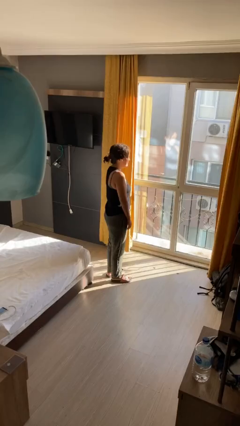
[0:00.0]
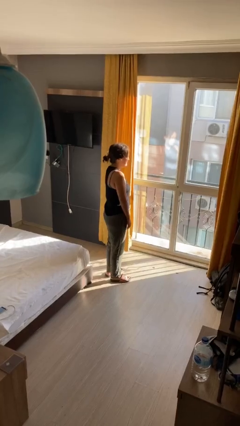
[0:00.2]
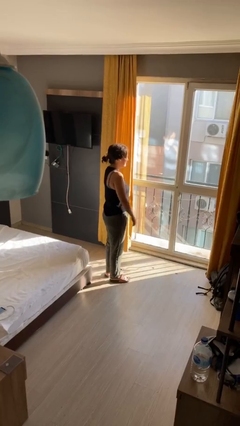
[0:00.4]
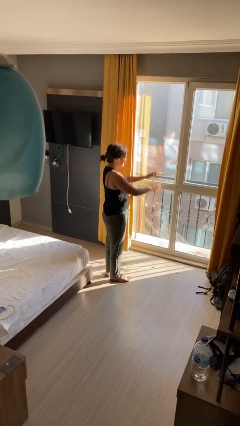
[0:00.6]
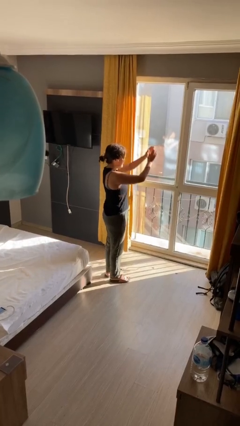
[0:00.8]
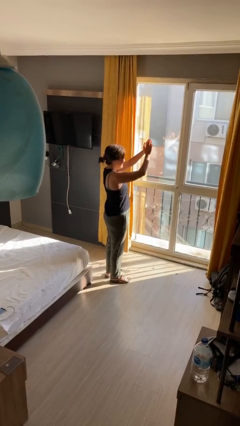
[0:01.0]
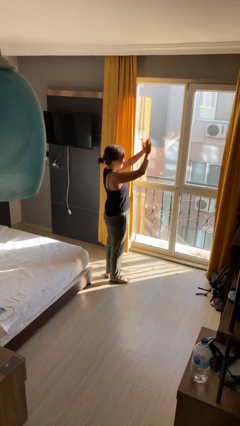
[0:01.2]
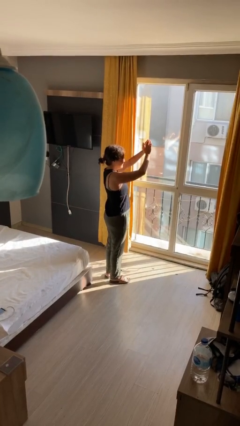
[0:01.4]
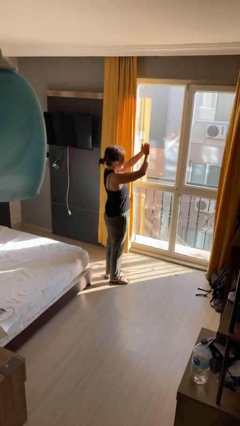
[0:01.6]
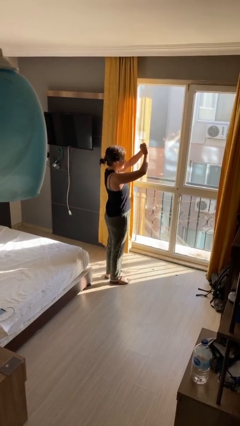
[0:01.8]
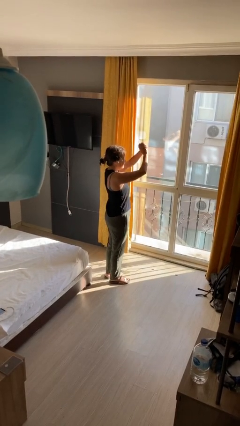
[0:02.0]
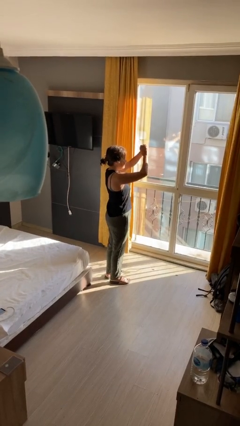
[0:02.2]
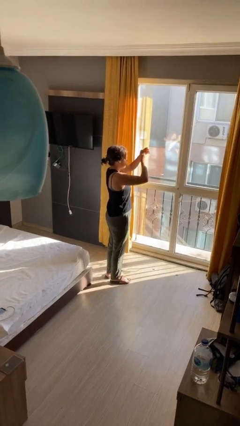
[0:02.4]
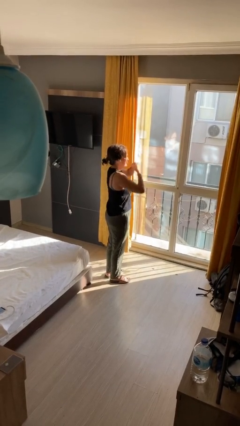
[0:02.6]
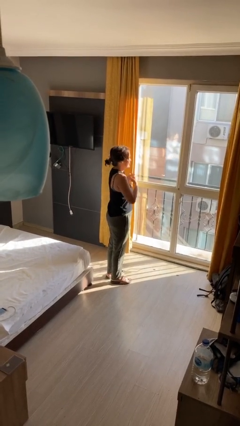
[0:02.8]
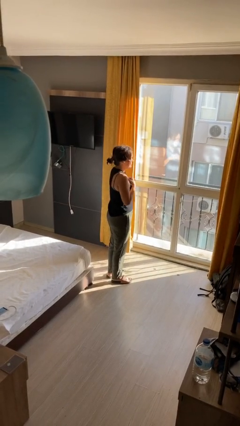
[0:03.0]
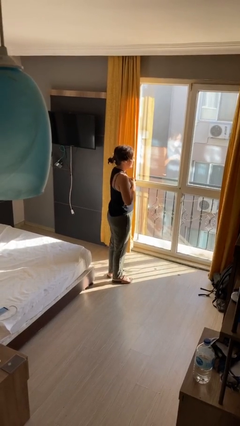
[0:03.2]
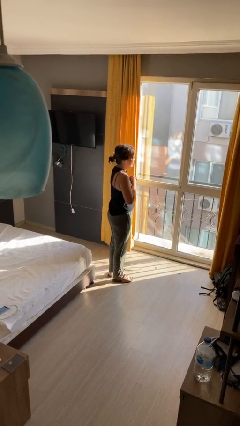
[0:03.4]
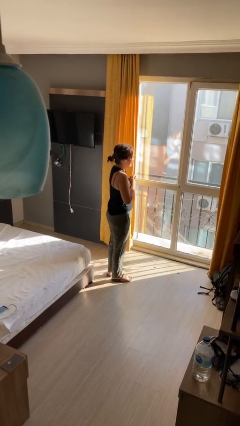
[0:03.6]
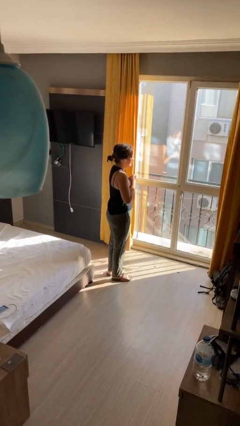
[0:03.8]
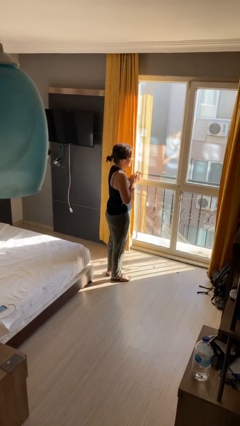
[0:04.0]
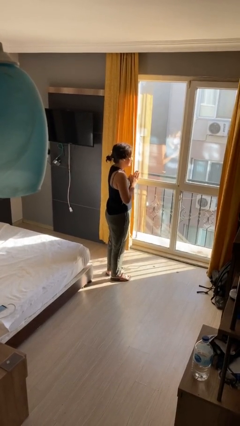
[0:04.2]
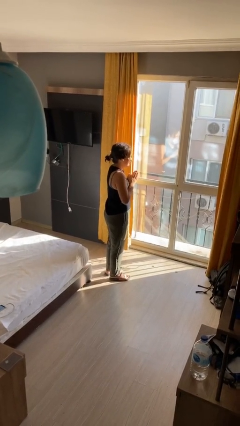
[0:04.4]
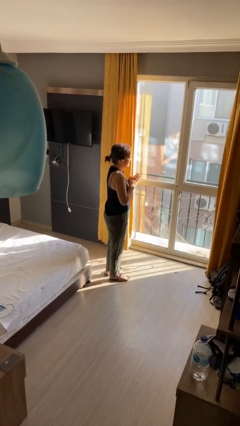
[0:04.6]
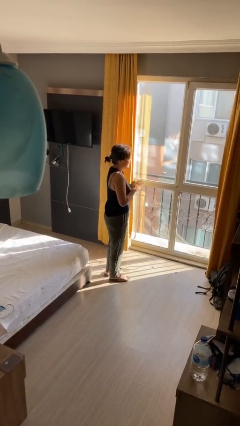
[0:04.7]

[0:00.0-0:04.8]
person prays

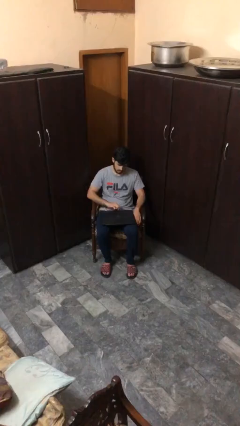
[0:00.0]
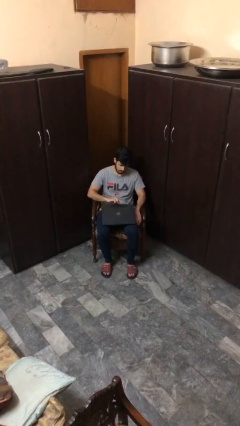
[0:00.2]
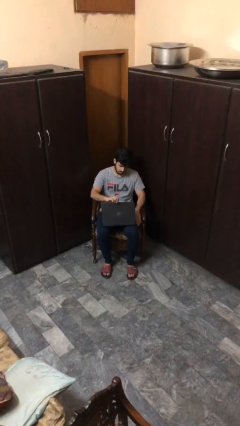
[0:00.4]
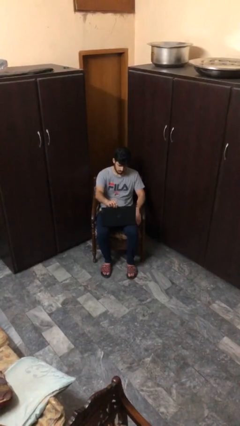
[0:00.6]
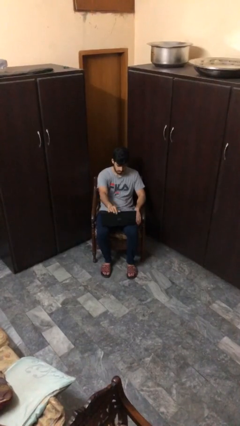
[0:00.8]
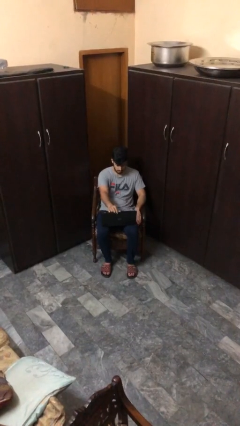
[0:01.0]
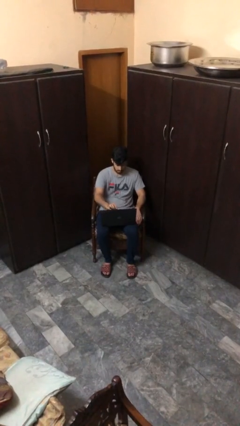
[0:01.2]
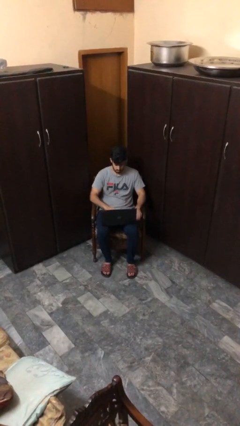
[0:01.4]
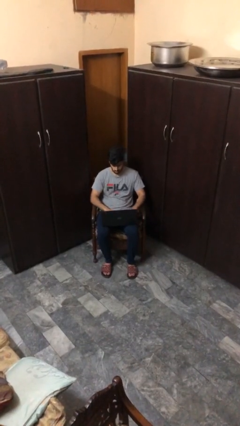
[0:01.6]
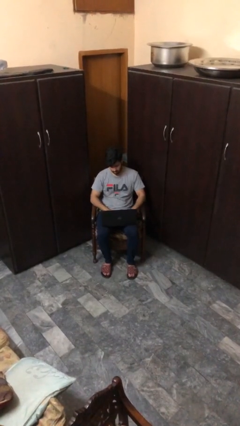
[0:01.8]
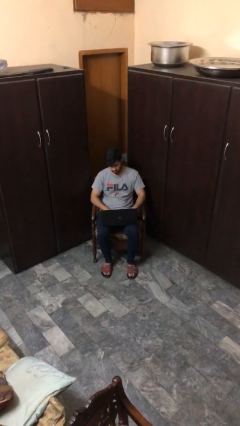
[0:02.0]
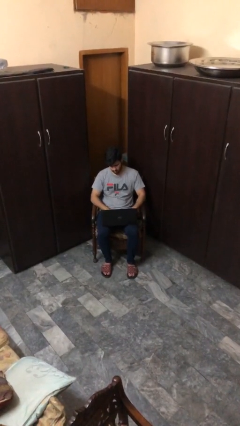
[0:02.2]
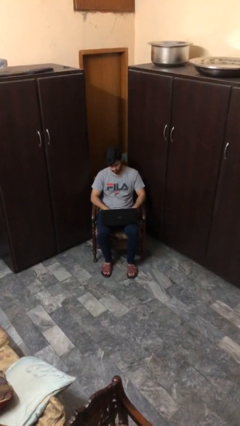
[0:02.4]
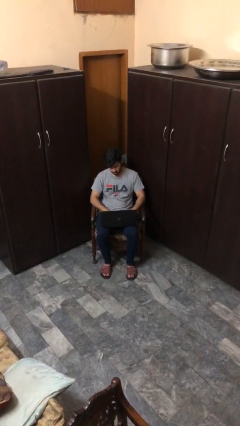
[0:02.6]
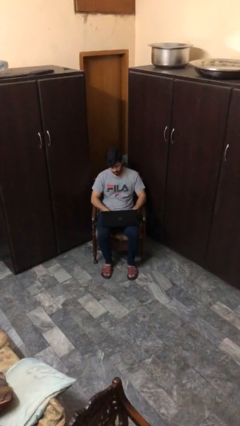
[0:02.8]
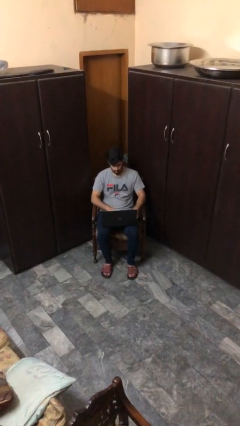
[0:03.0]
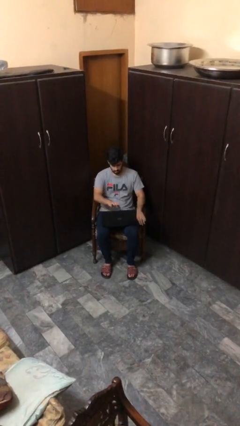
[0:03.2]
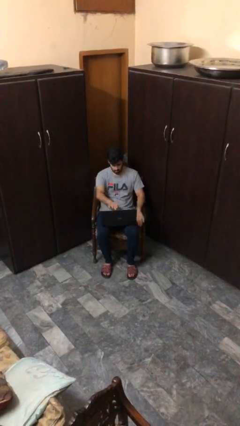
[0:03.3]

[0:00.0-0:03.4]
person opens laptop

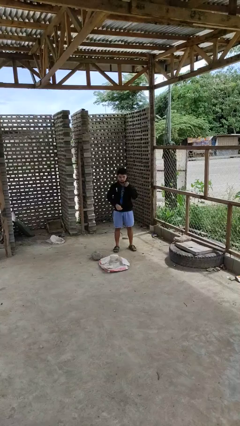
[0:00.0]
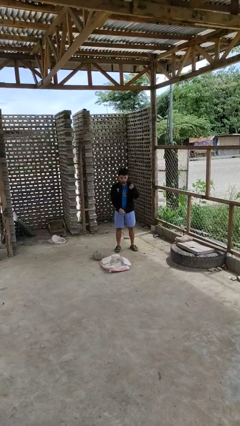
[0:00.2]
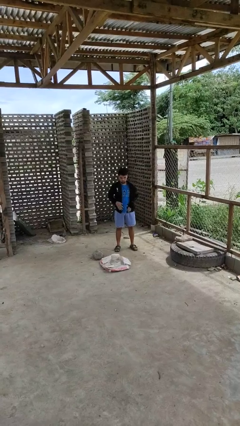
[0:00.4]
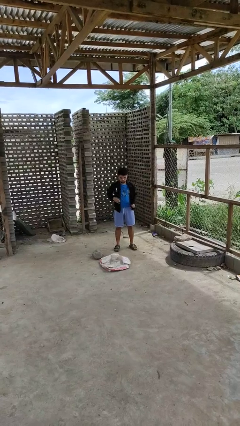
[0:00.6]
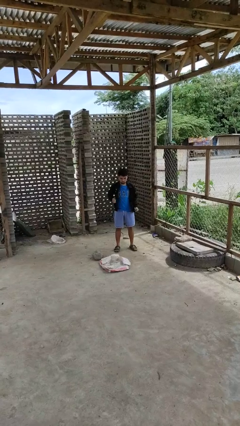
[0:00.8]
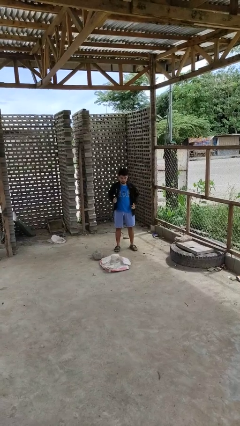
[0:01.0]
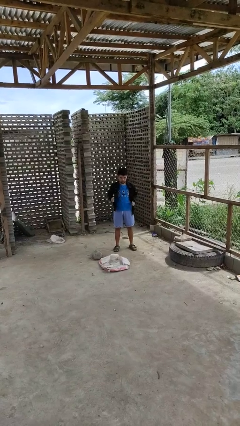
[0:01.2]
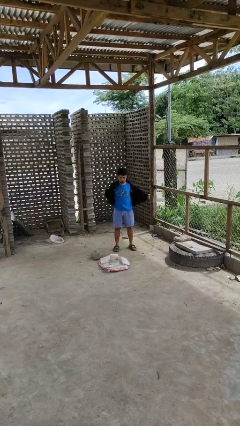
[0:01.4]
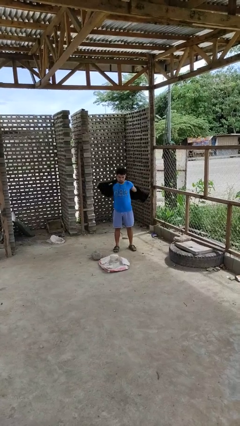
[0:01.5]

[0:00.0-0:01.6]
person unzips jacket

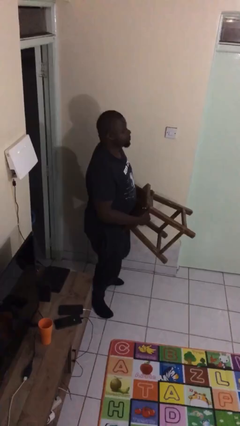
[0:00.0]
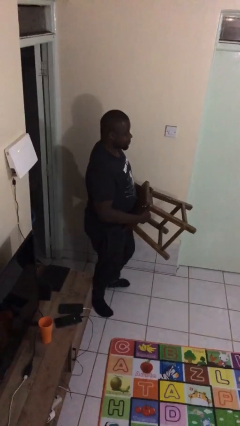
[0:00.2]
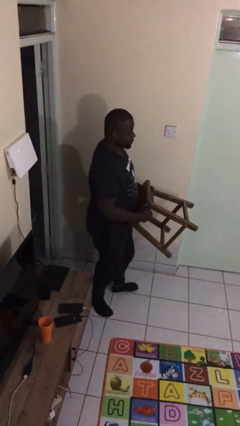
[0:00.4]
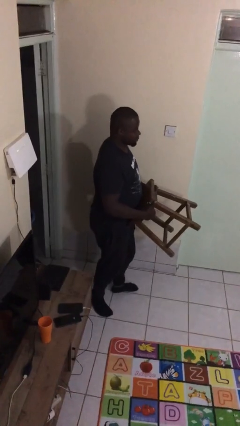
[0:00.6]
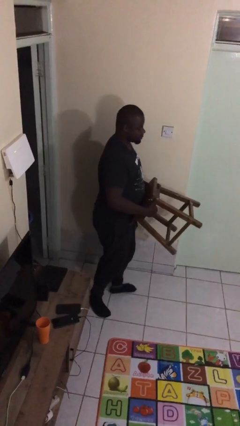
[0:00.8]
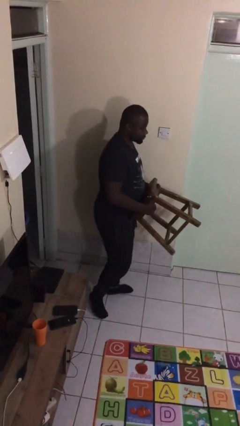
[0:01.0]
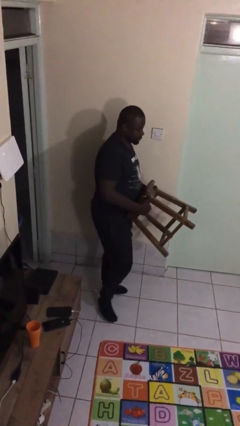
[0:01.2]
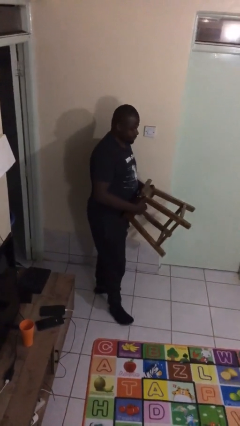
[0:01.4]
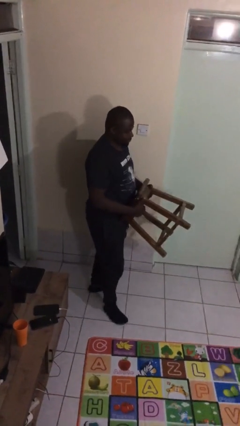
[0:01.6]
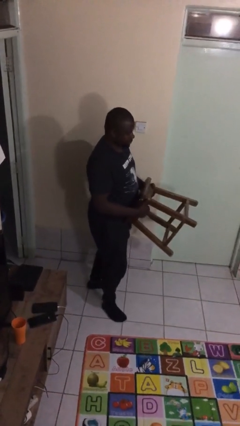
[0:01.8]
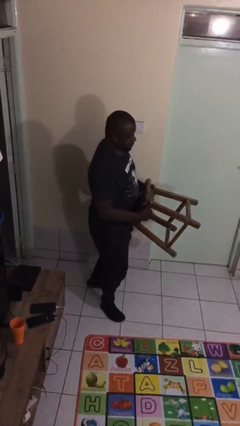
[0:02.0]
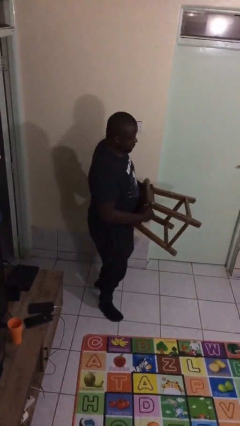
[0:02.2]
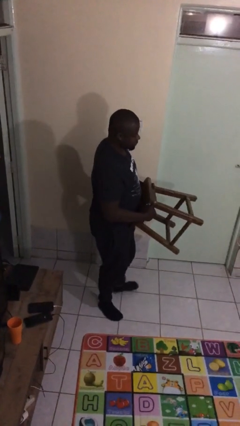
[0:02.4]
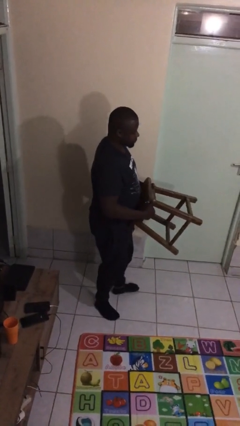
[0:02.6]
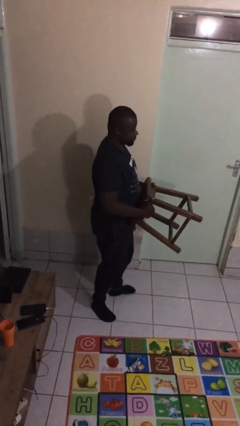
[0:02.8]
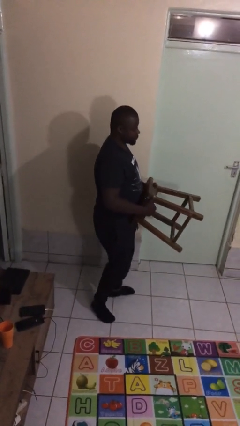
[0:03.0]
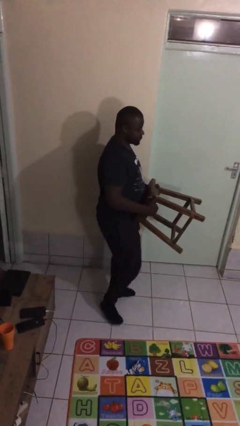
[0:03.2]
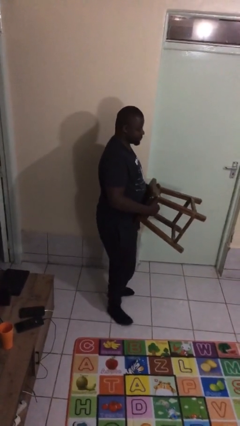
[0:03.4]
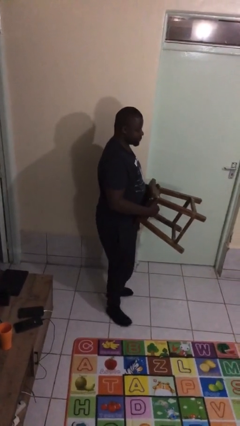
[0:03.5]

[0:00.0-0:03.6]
person carries furniture

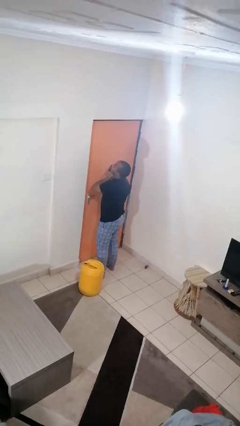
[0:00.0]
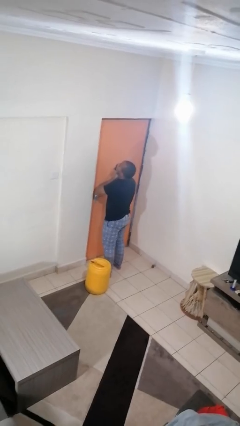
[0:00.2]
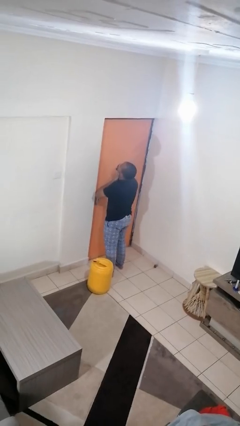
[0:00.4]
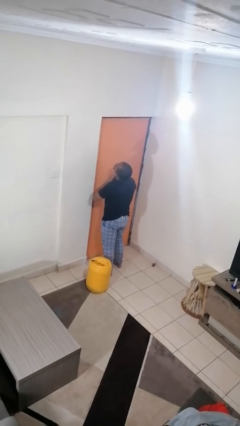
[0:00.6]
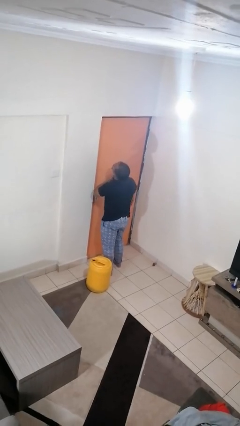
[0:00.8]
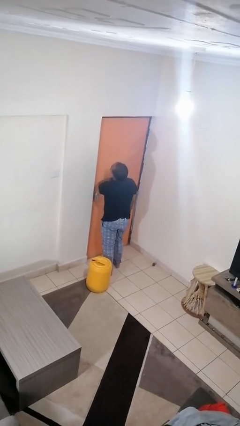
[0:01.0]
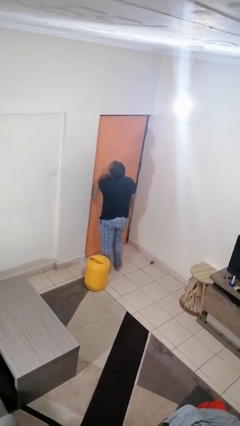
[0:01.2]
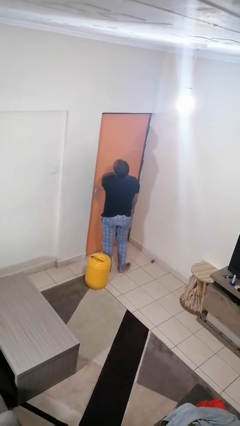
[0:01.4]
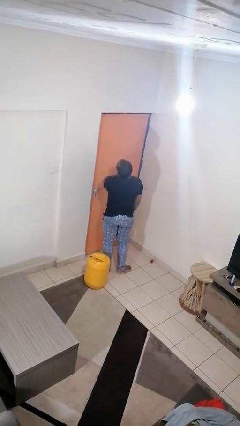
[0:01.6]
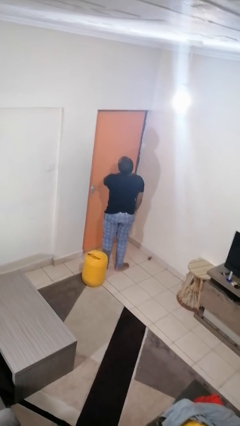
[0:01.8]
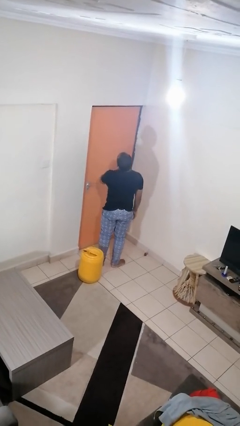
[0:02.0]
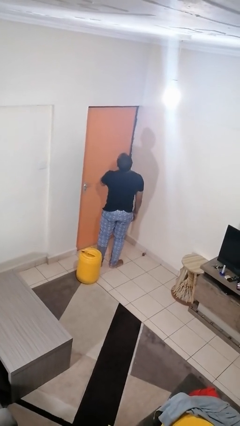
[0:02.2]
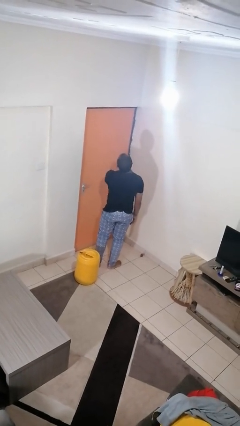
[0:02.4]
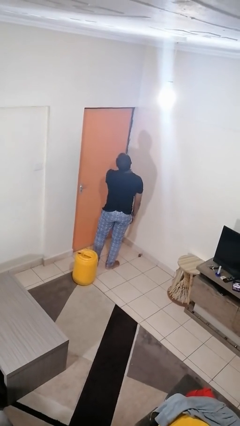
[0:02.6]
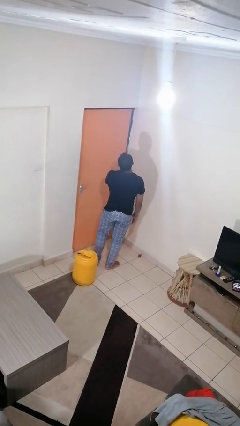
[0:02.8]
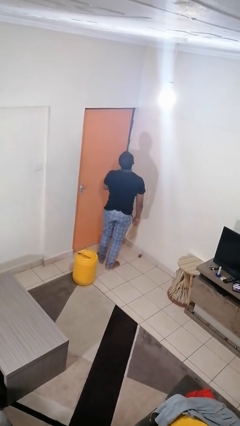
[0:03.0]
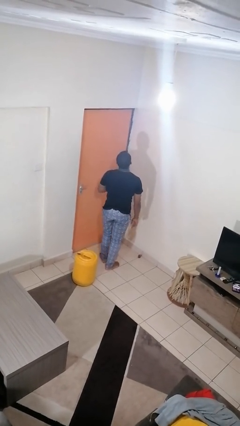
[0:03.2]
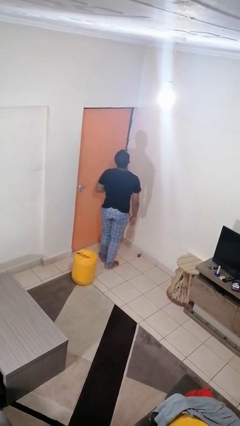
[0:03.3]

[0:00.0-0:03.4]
person rubs neck

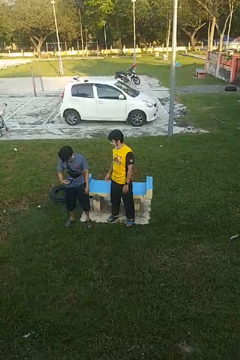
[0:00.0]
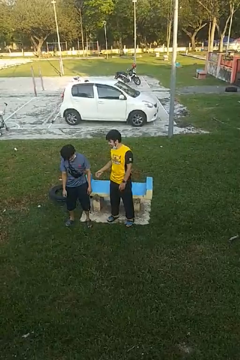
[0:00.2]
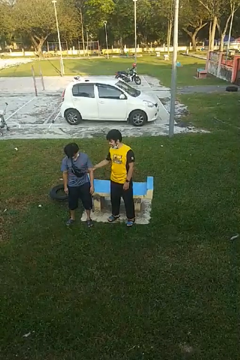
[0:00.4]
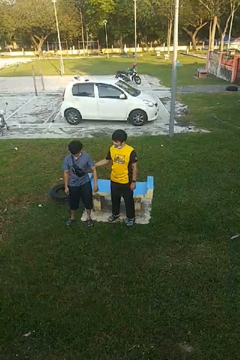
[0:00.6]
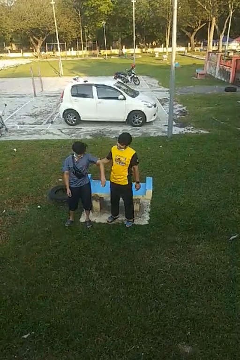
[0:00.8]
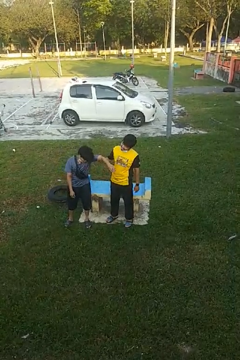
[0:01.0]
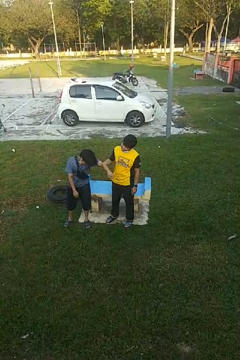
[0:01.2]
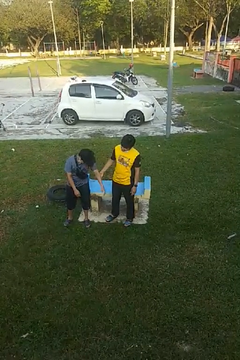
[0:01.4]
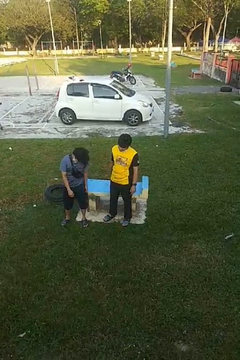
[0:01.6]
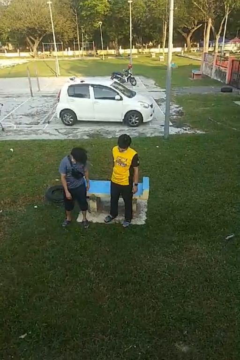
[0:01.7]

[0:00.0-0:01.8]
person grabs person by bicep
